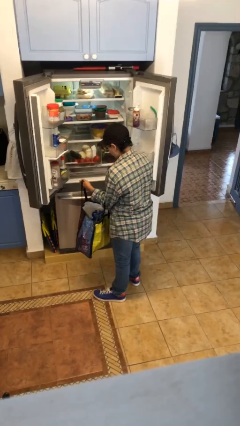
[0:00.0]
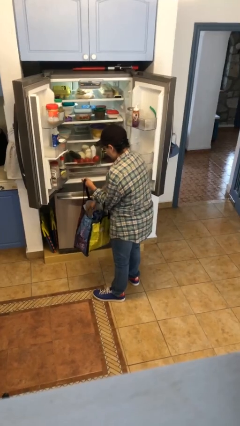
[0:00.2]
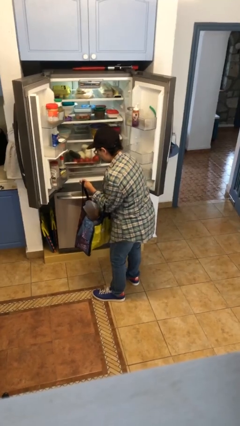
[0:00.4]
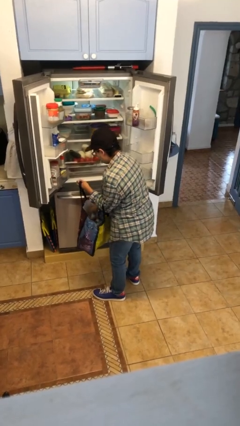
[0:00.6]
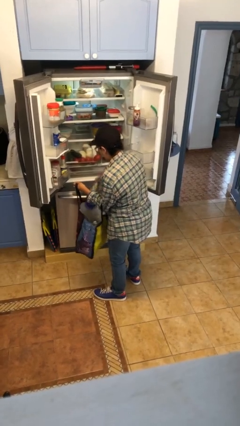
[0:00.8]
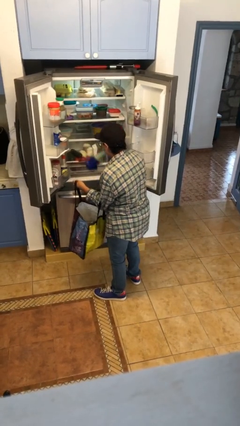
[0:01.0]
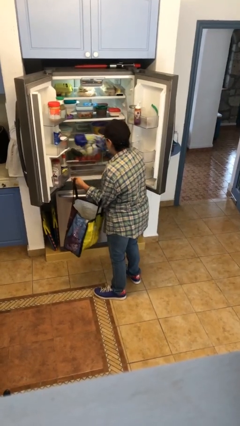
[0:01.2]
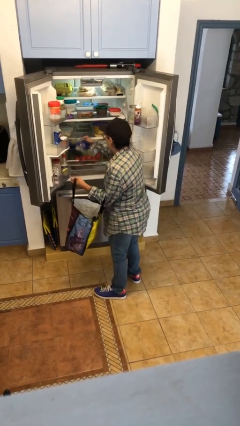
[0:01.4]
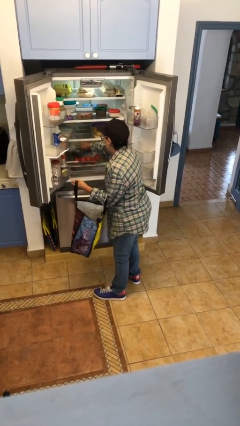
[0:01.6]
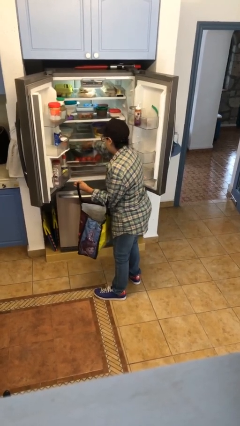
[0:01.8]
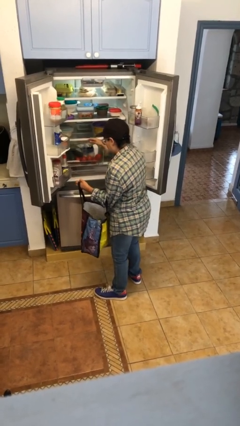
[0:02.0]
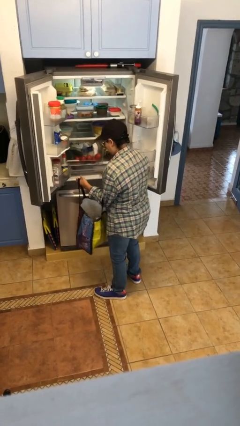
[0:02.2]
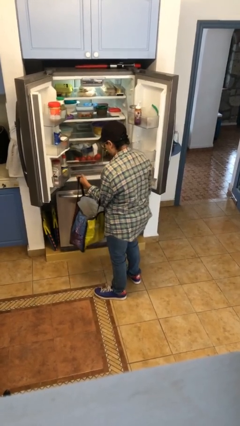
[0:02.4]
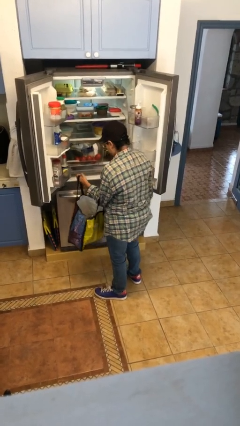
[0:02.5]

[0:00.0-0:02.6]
person loads groceries into refrigerator

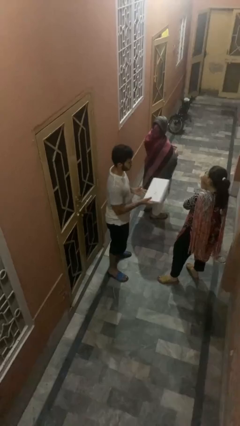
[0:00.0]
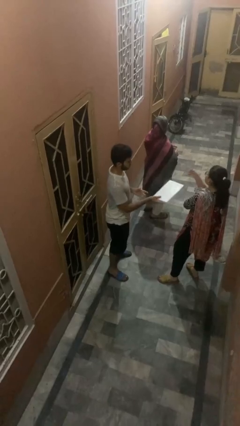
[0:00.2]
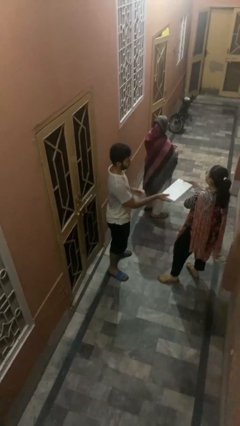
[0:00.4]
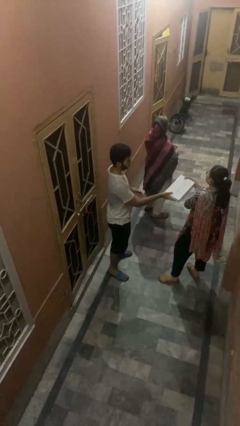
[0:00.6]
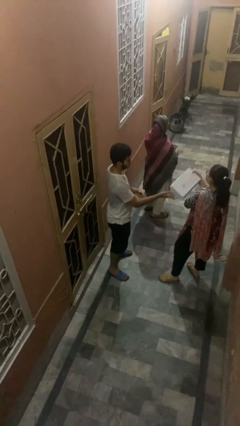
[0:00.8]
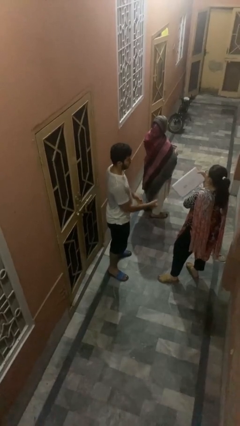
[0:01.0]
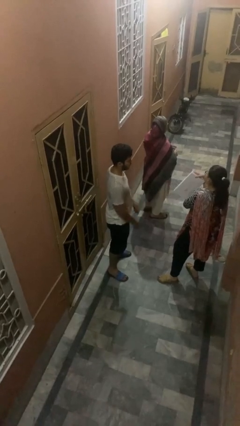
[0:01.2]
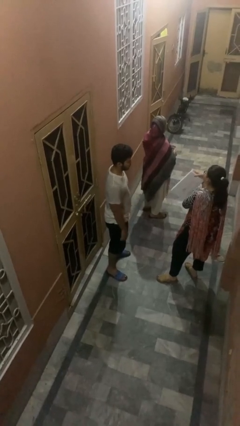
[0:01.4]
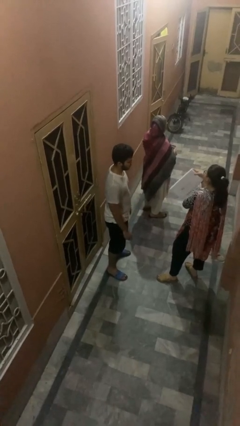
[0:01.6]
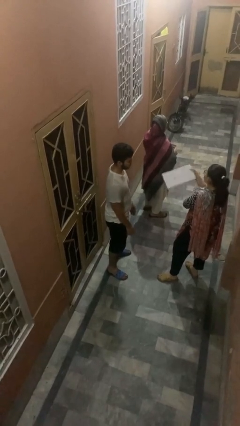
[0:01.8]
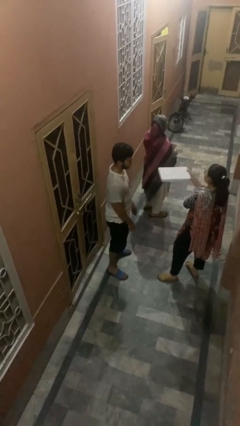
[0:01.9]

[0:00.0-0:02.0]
person transfers object to person

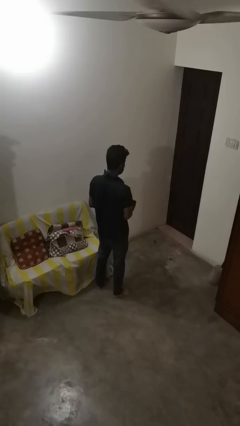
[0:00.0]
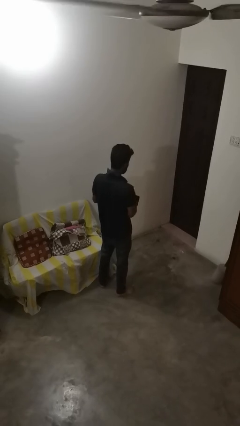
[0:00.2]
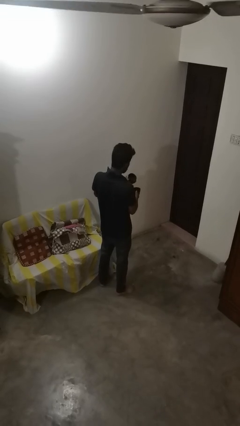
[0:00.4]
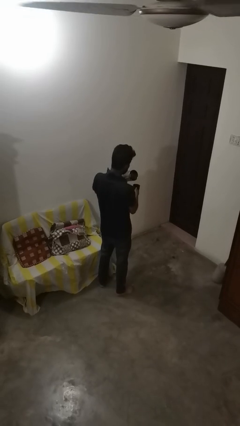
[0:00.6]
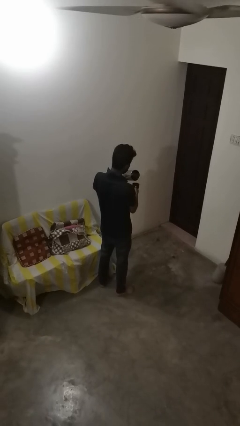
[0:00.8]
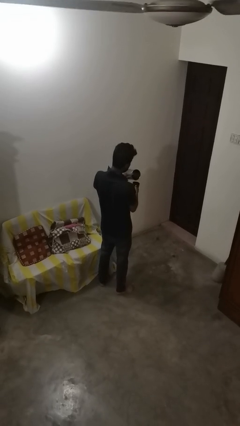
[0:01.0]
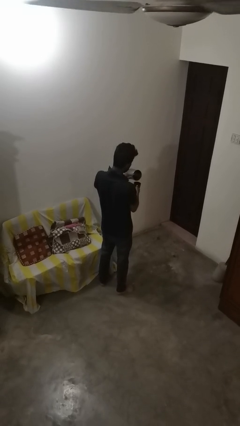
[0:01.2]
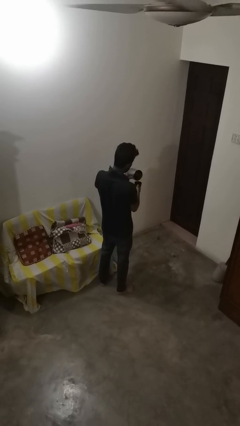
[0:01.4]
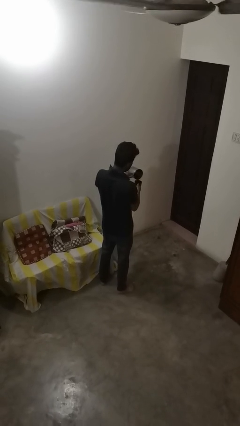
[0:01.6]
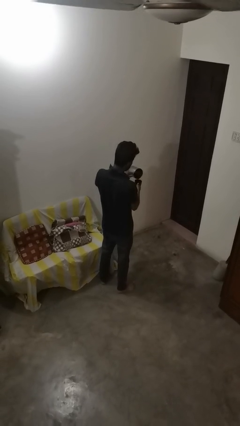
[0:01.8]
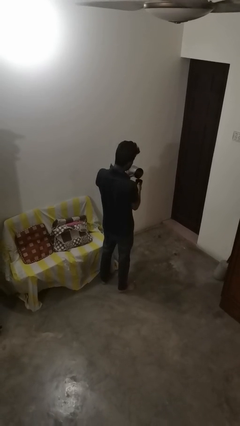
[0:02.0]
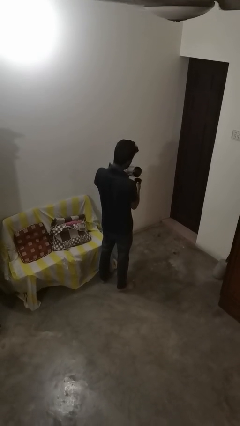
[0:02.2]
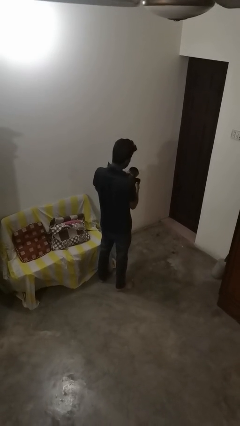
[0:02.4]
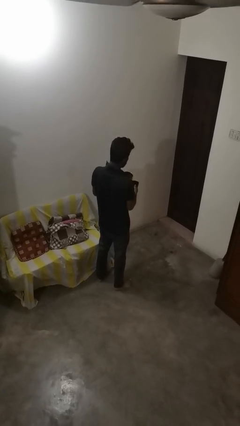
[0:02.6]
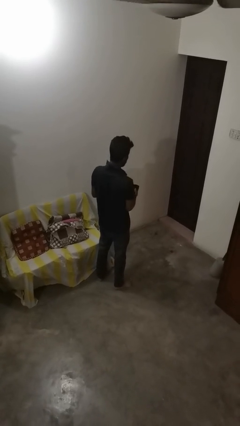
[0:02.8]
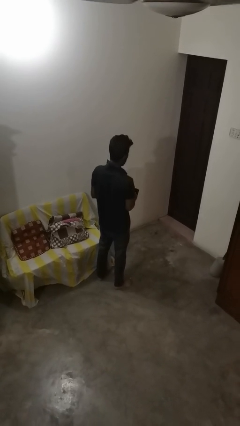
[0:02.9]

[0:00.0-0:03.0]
person pours coffee into mug

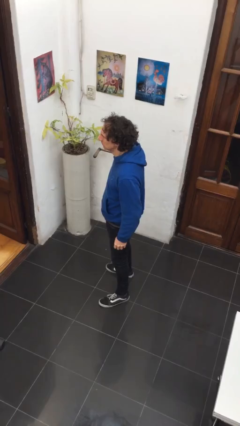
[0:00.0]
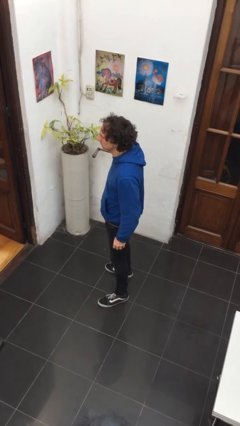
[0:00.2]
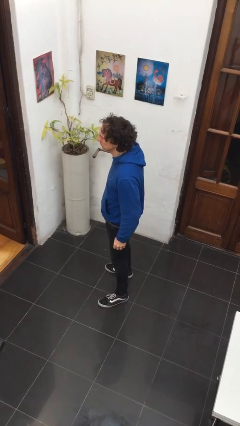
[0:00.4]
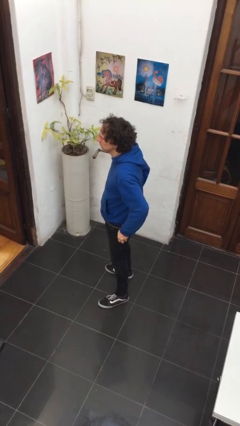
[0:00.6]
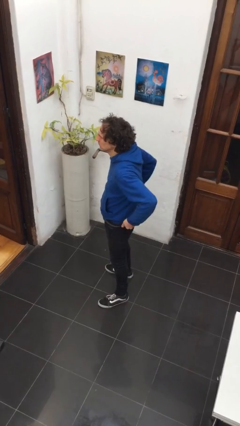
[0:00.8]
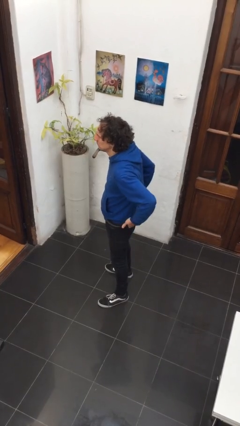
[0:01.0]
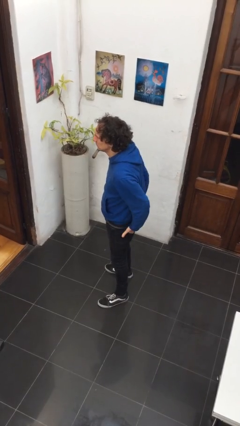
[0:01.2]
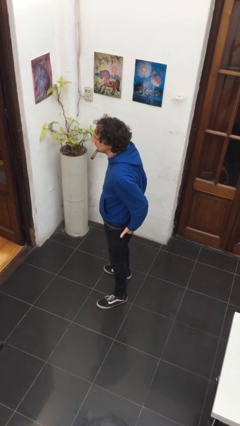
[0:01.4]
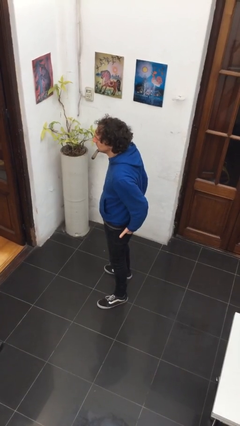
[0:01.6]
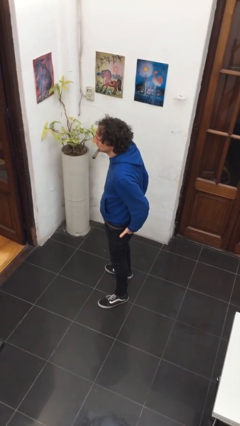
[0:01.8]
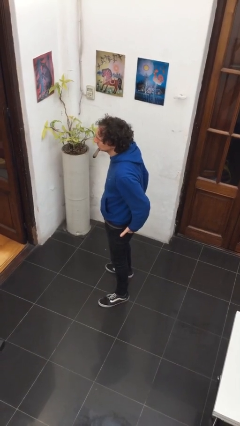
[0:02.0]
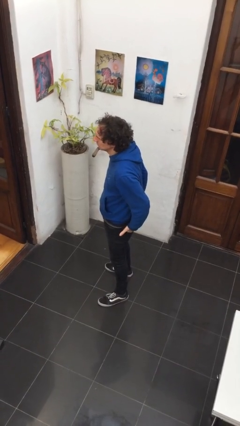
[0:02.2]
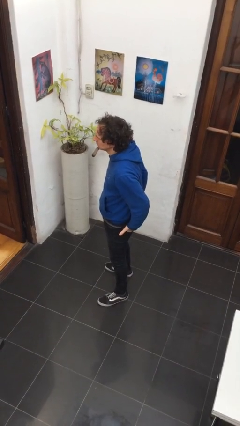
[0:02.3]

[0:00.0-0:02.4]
person puts hands in back pockets

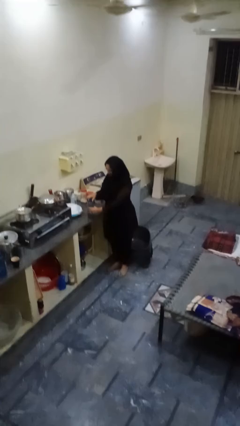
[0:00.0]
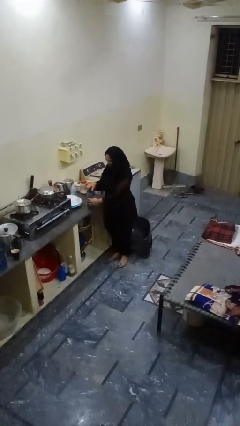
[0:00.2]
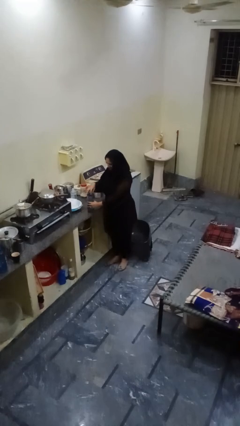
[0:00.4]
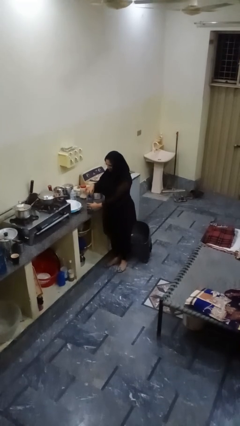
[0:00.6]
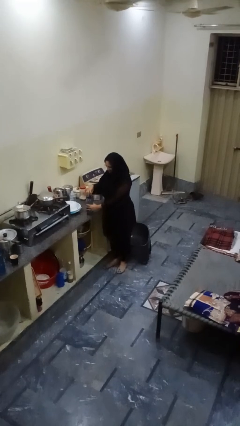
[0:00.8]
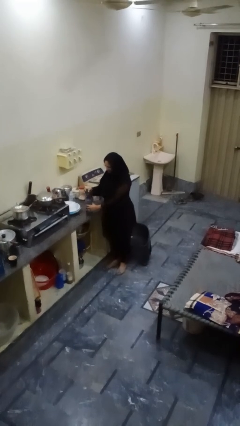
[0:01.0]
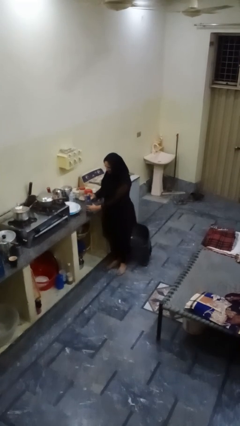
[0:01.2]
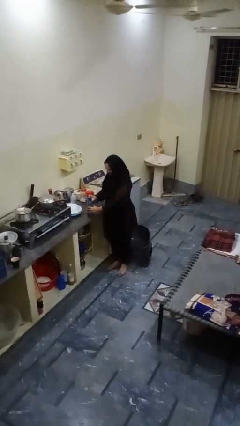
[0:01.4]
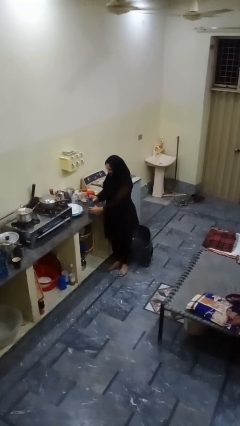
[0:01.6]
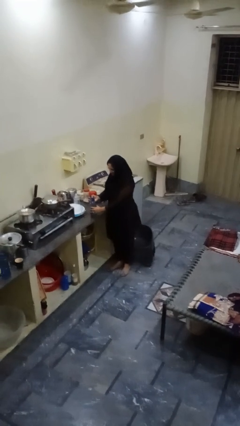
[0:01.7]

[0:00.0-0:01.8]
person unscrews lid from bottle

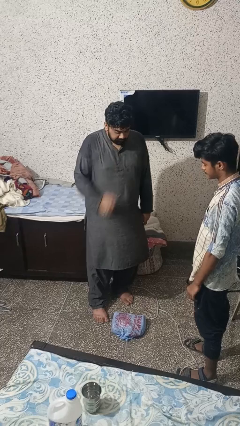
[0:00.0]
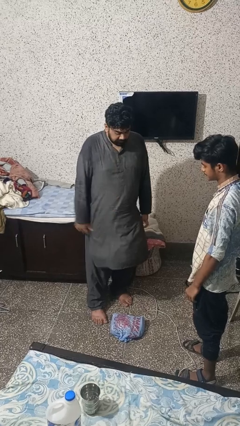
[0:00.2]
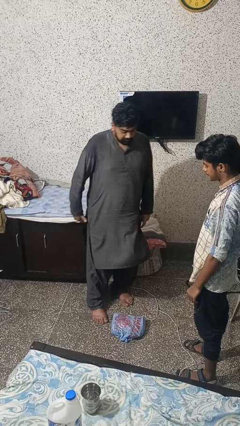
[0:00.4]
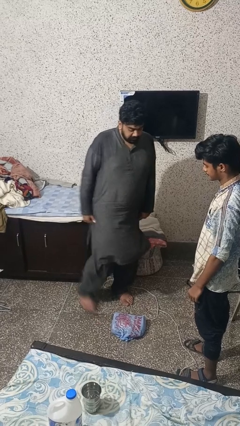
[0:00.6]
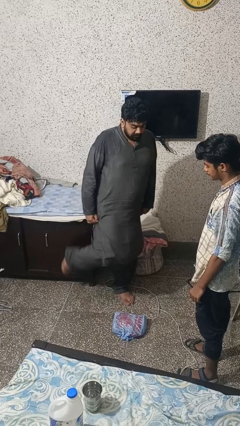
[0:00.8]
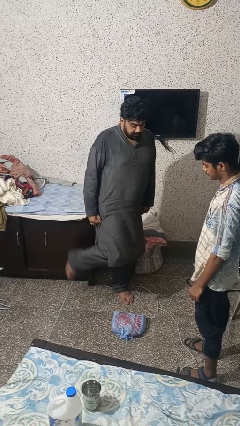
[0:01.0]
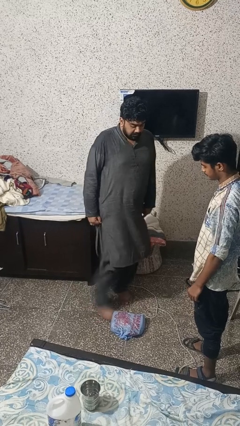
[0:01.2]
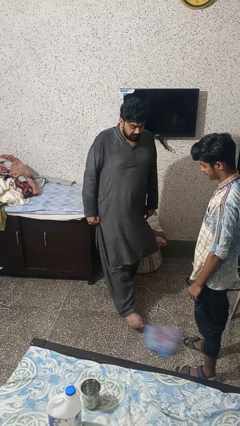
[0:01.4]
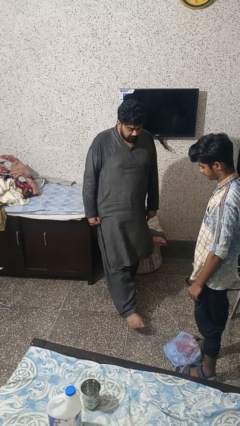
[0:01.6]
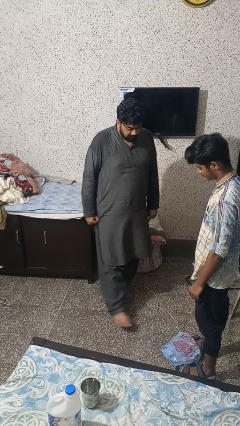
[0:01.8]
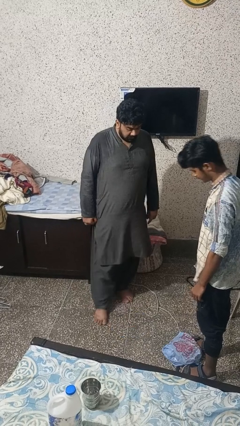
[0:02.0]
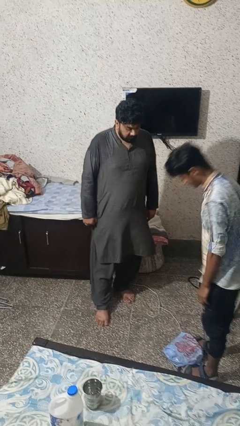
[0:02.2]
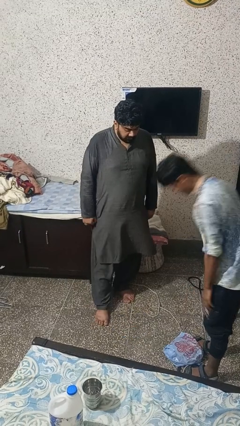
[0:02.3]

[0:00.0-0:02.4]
person kicks object to person

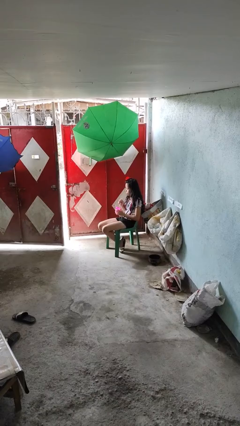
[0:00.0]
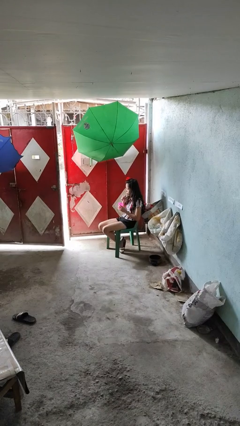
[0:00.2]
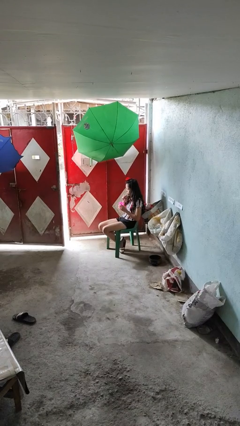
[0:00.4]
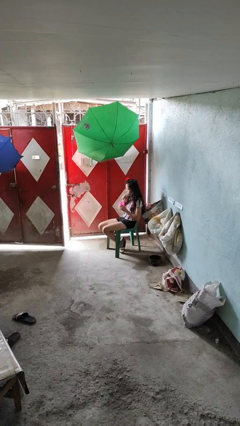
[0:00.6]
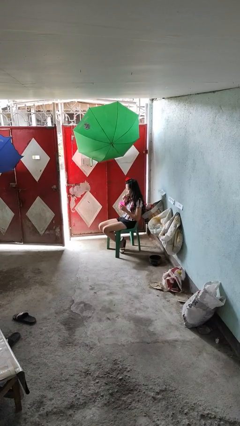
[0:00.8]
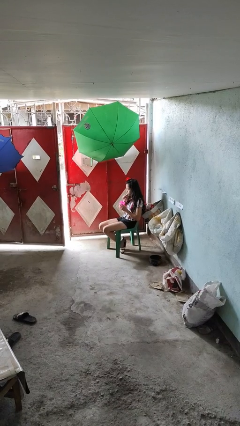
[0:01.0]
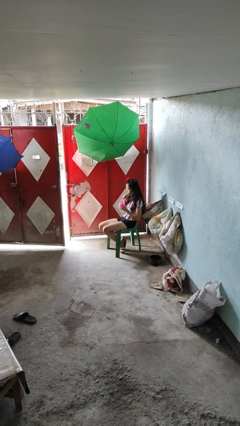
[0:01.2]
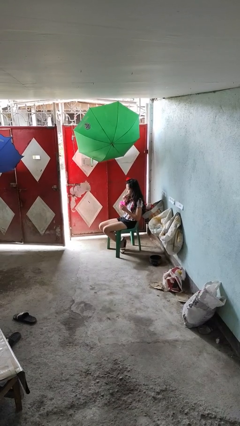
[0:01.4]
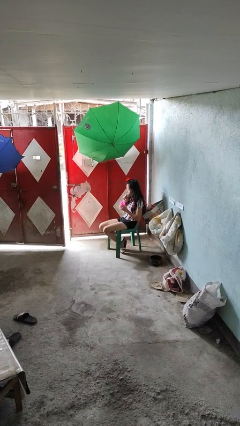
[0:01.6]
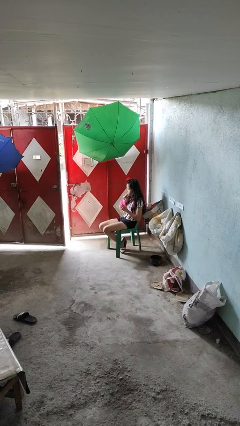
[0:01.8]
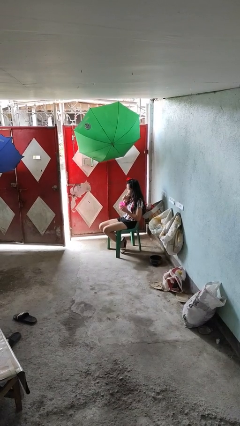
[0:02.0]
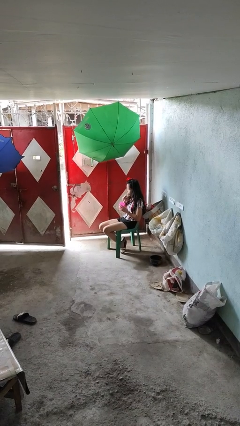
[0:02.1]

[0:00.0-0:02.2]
person drinks from straw

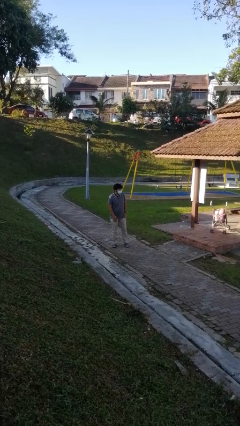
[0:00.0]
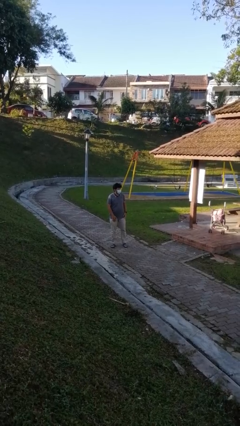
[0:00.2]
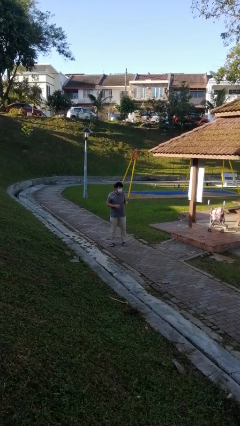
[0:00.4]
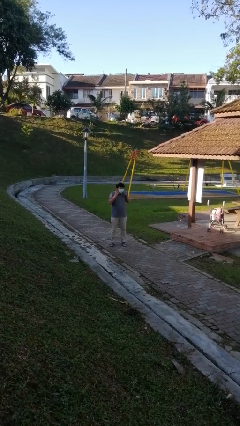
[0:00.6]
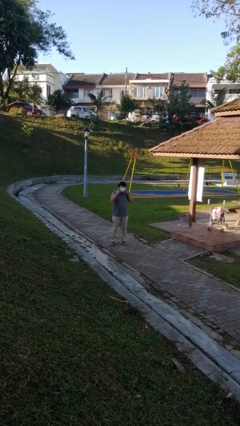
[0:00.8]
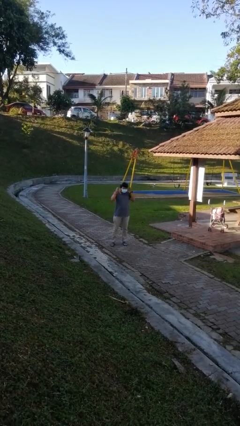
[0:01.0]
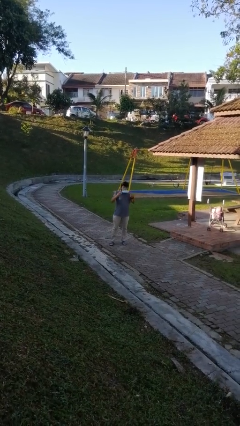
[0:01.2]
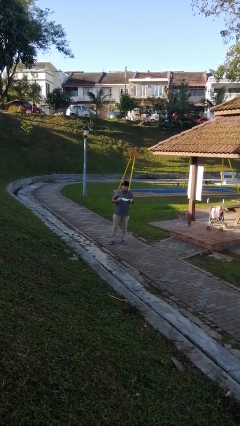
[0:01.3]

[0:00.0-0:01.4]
person takes off facemask
